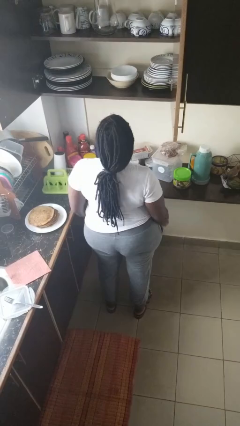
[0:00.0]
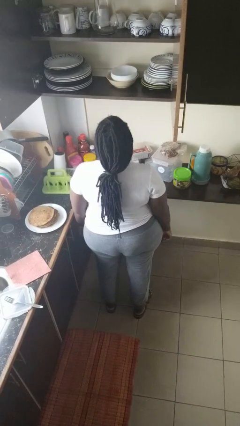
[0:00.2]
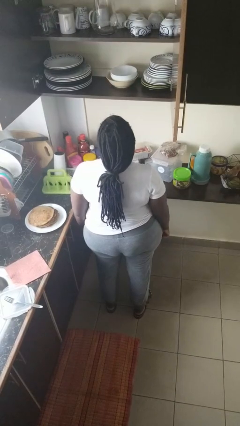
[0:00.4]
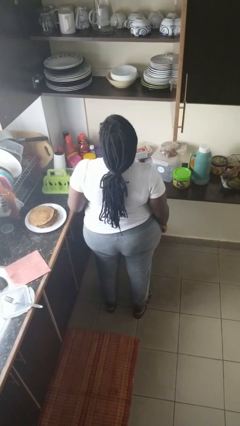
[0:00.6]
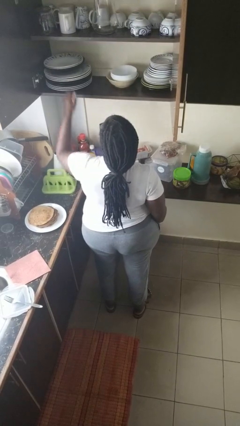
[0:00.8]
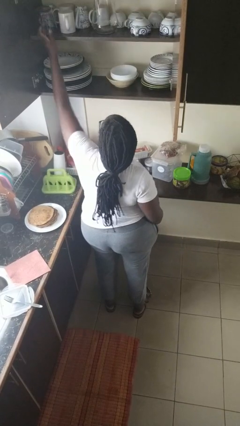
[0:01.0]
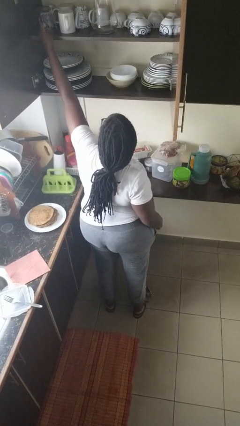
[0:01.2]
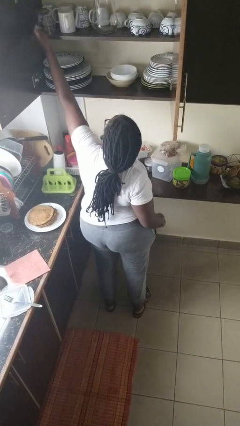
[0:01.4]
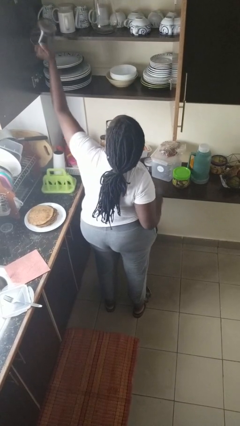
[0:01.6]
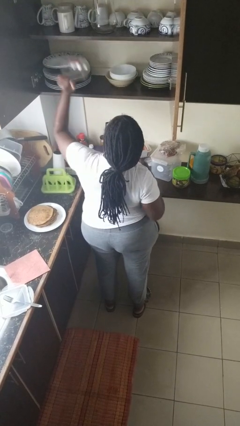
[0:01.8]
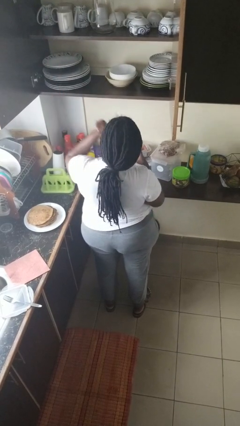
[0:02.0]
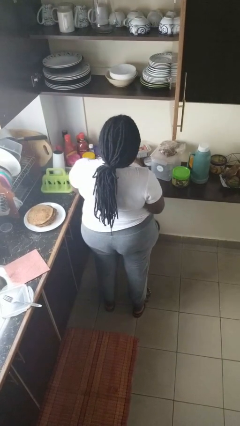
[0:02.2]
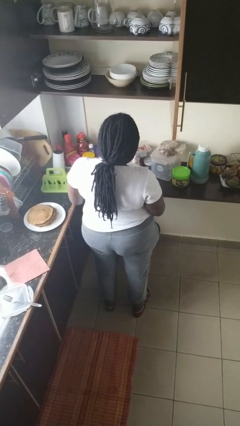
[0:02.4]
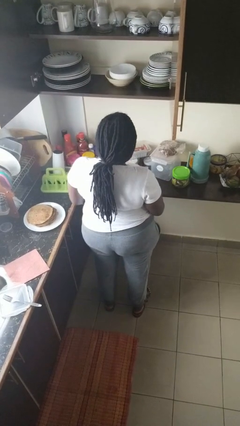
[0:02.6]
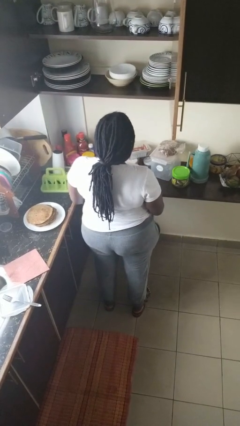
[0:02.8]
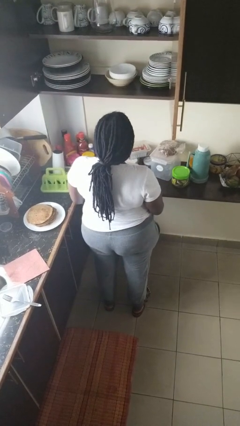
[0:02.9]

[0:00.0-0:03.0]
person takes object from cabinet

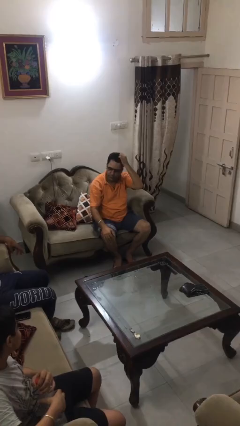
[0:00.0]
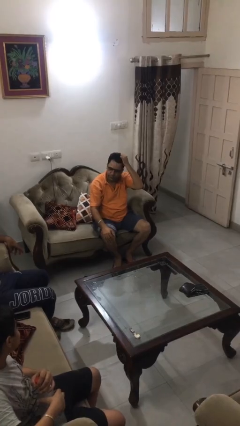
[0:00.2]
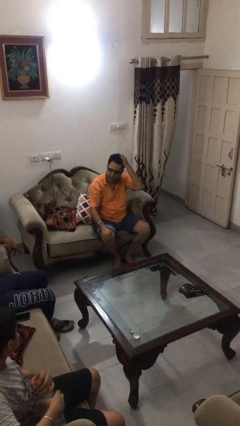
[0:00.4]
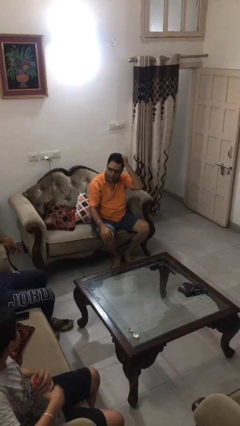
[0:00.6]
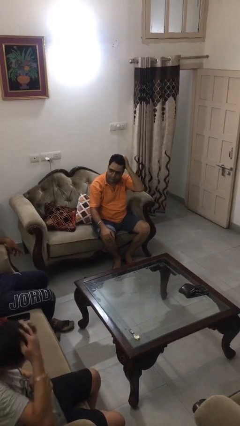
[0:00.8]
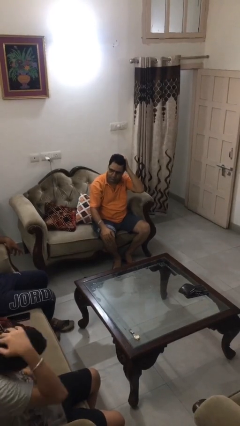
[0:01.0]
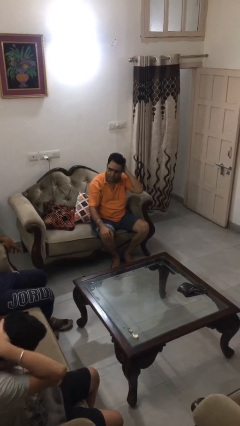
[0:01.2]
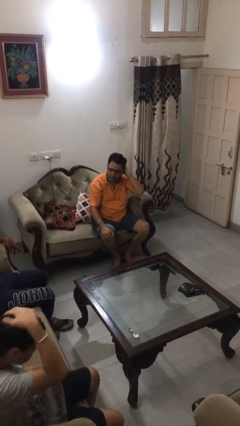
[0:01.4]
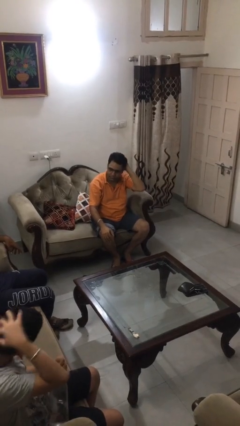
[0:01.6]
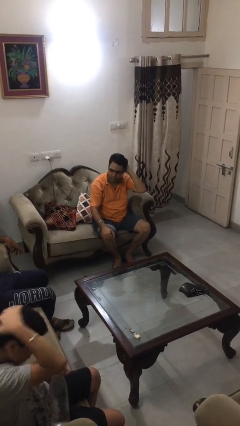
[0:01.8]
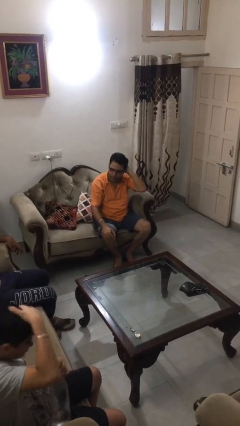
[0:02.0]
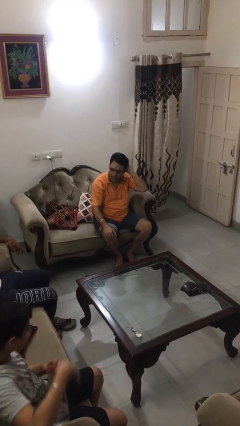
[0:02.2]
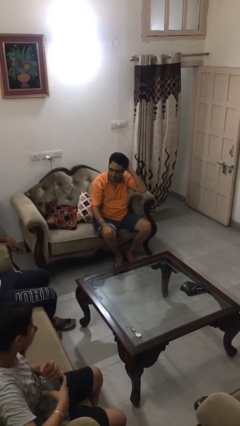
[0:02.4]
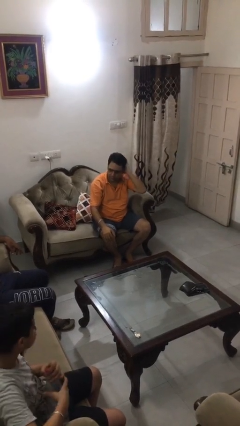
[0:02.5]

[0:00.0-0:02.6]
person scratches face

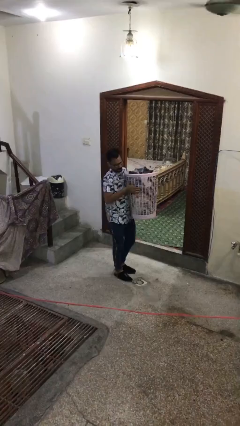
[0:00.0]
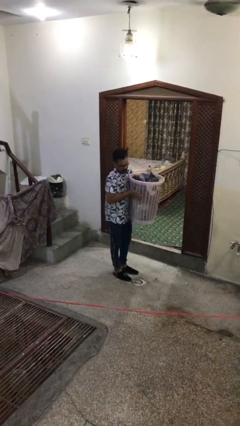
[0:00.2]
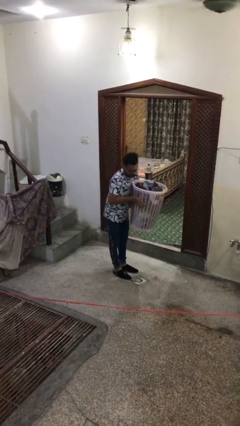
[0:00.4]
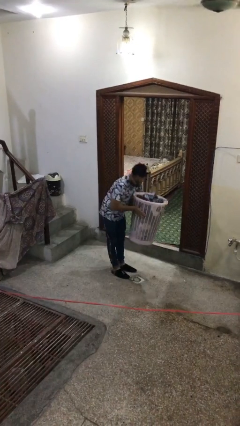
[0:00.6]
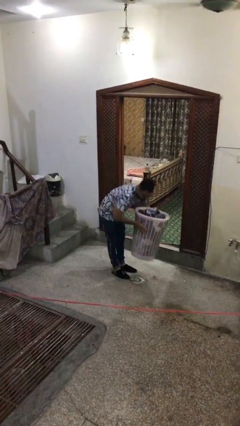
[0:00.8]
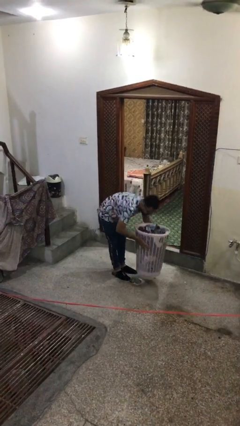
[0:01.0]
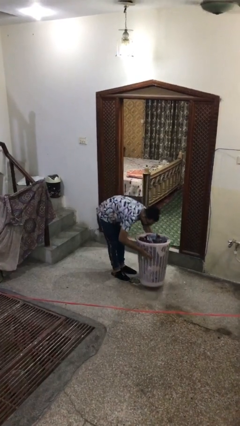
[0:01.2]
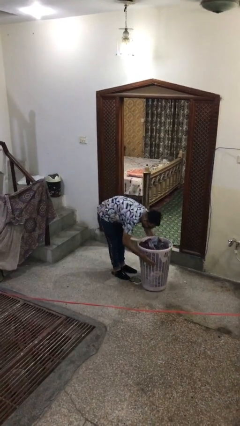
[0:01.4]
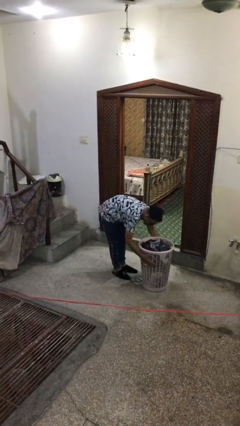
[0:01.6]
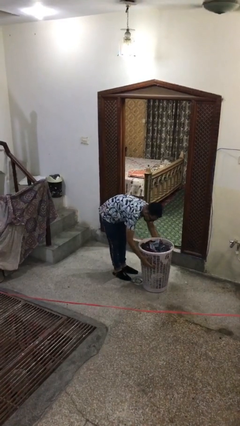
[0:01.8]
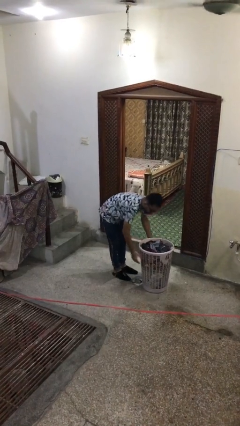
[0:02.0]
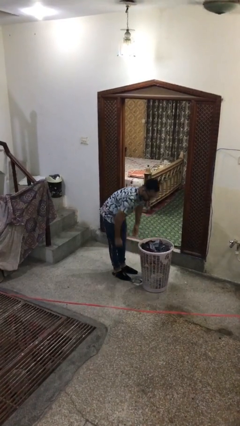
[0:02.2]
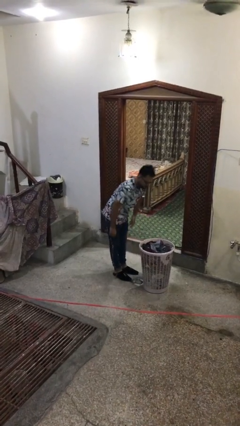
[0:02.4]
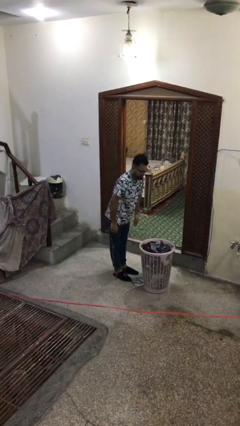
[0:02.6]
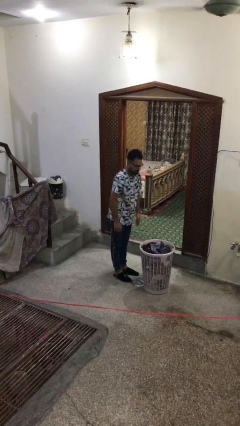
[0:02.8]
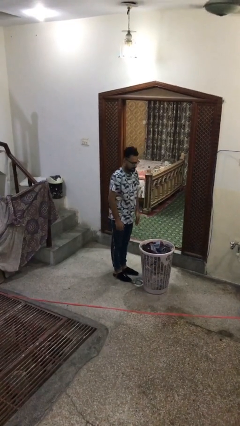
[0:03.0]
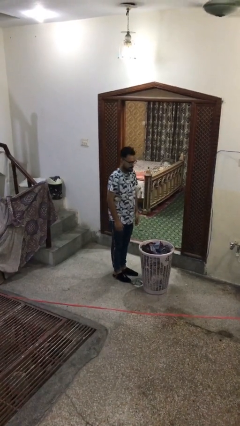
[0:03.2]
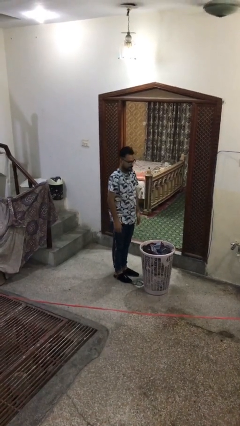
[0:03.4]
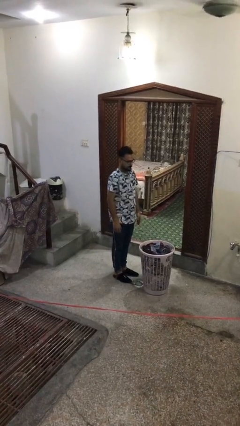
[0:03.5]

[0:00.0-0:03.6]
person puts down object on floor

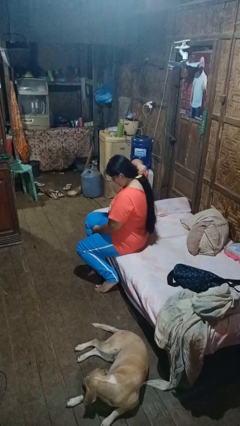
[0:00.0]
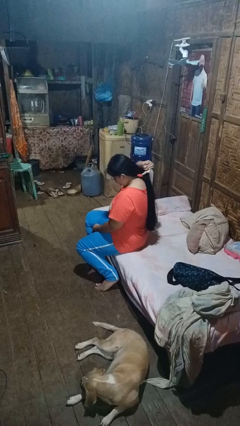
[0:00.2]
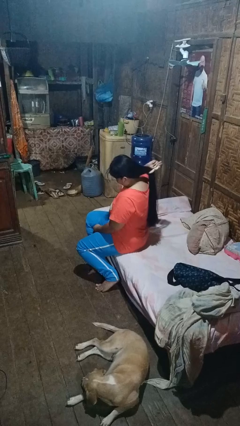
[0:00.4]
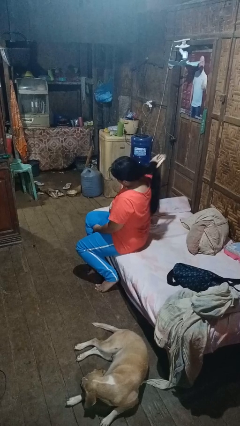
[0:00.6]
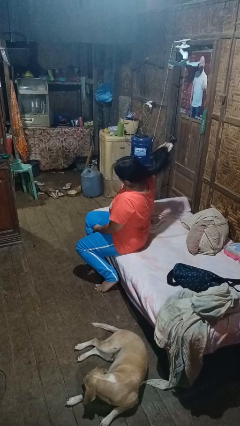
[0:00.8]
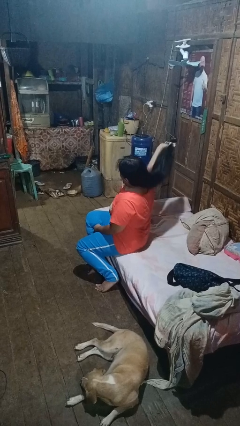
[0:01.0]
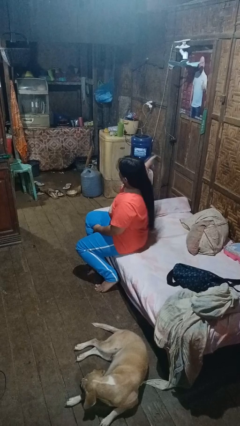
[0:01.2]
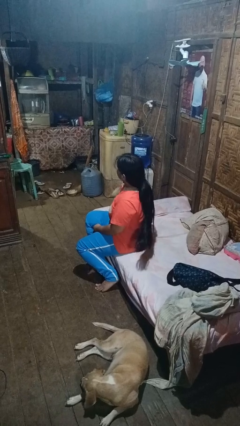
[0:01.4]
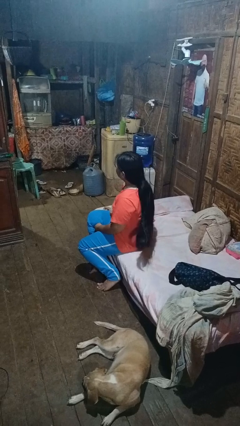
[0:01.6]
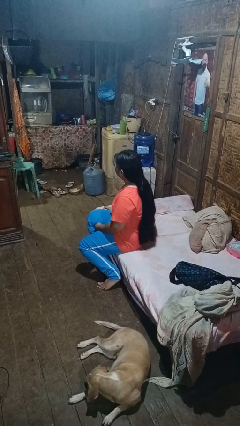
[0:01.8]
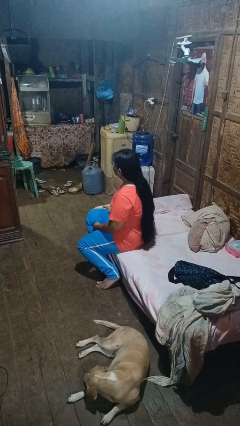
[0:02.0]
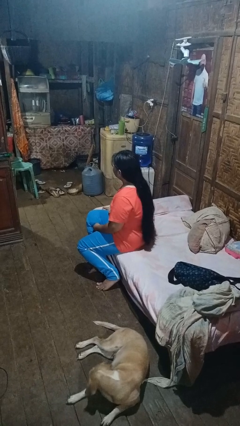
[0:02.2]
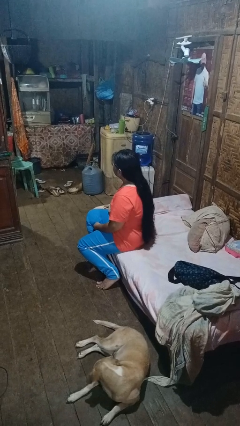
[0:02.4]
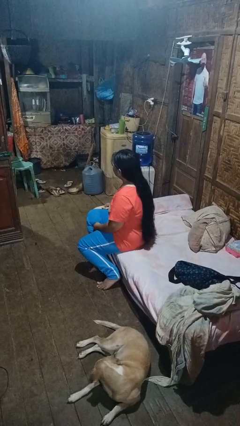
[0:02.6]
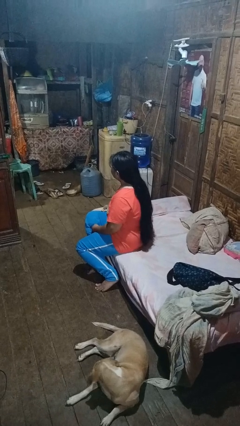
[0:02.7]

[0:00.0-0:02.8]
person takes off hairtie

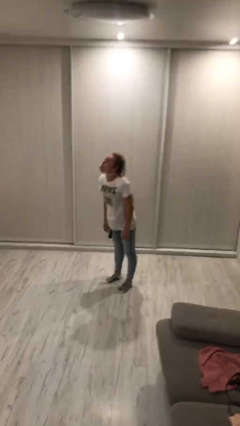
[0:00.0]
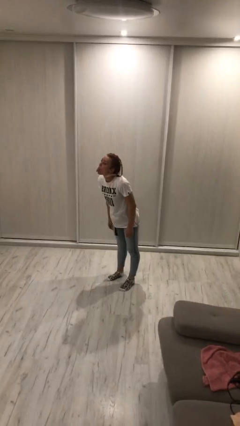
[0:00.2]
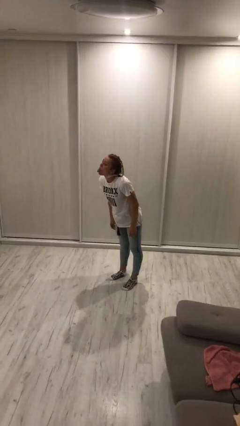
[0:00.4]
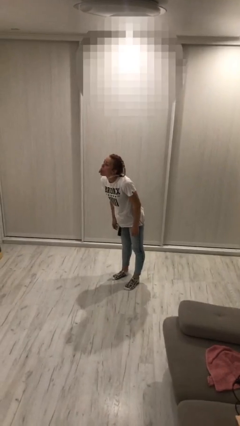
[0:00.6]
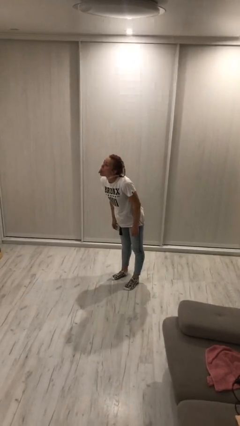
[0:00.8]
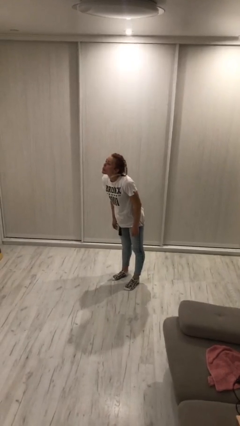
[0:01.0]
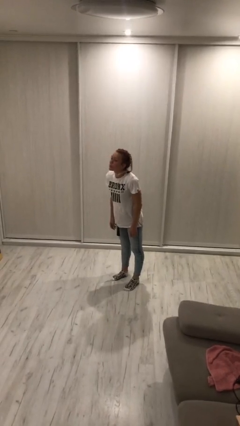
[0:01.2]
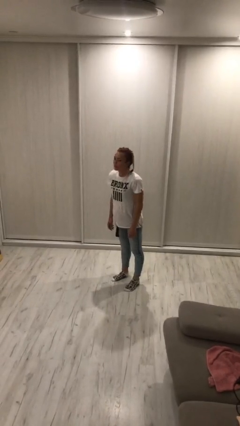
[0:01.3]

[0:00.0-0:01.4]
person sticks out tongue

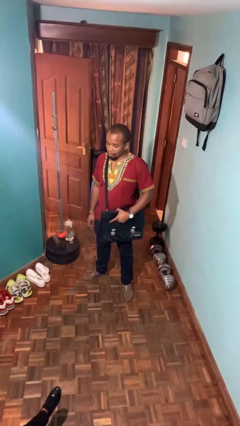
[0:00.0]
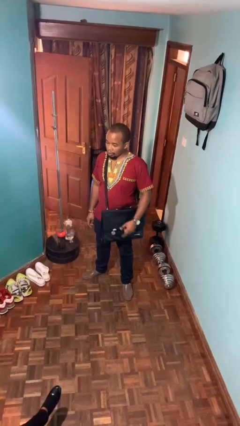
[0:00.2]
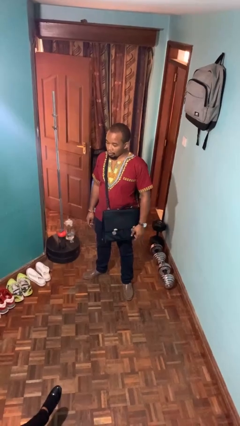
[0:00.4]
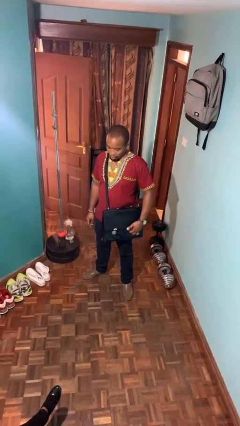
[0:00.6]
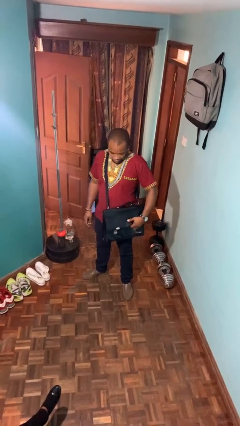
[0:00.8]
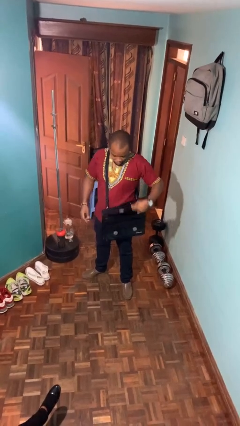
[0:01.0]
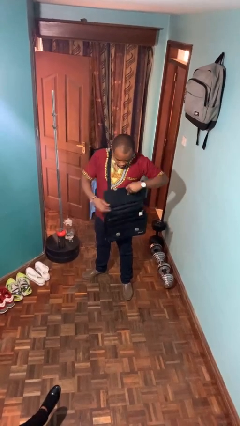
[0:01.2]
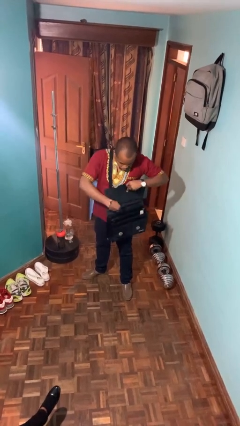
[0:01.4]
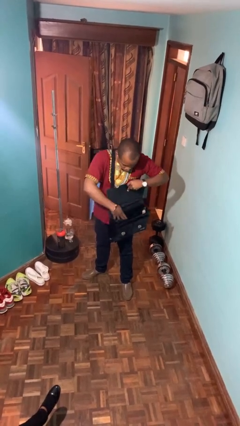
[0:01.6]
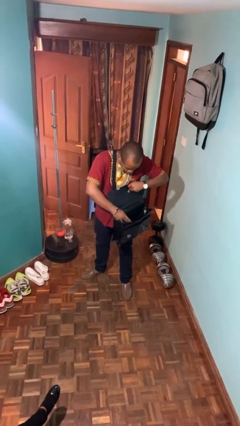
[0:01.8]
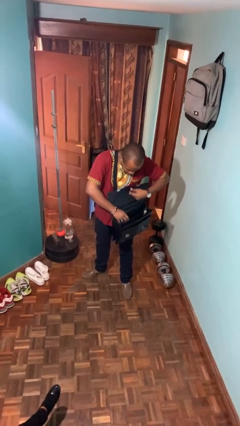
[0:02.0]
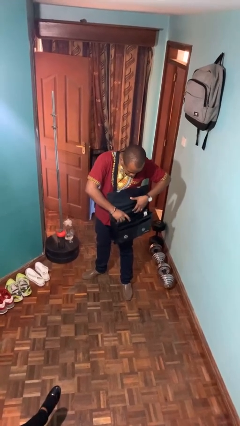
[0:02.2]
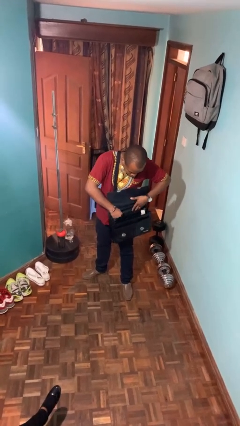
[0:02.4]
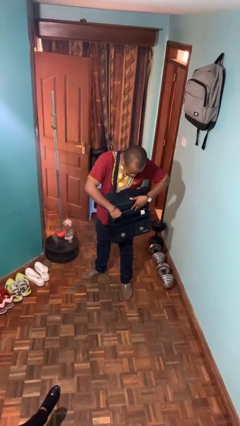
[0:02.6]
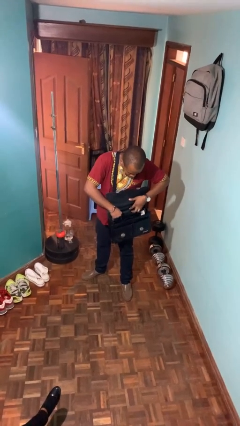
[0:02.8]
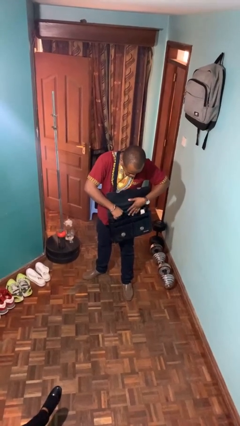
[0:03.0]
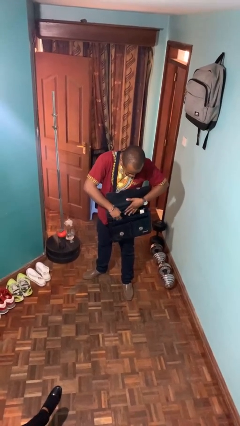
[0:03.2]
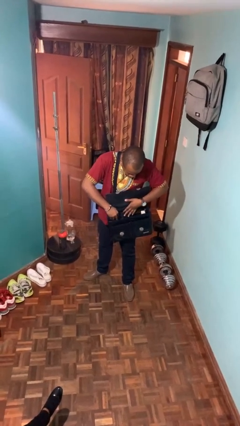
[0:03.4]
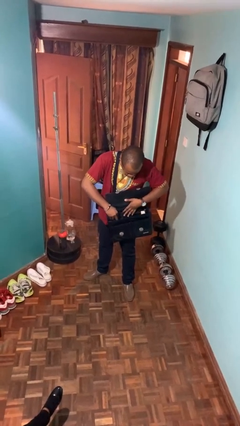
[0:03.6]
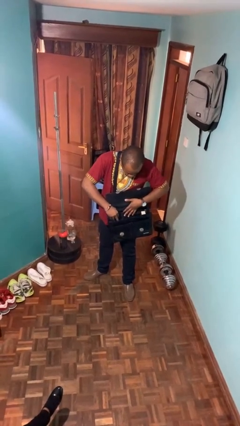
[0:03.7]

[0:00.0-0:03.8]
person searches in purse

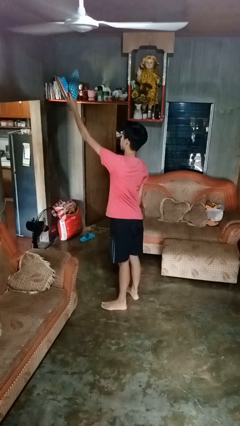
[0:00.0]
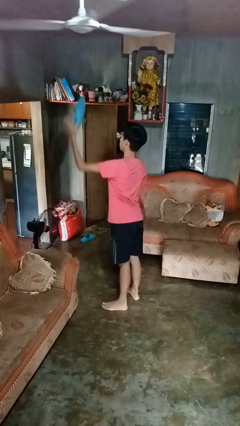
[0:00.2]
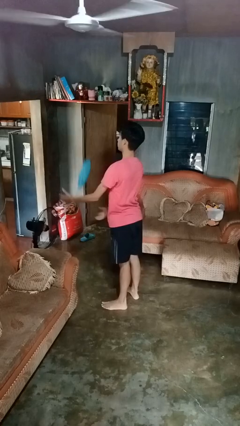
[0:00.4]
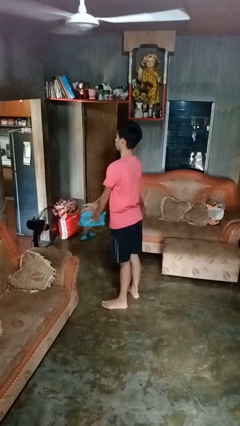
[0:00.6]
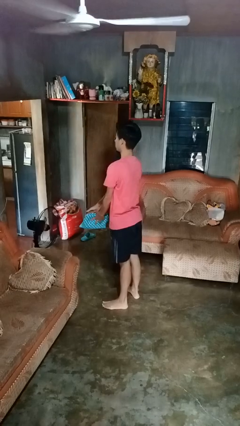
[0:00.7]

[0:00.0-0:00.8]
person drops object
